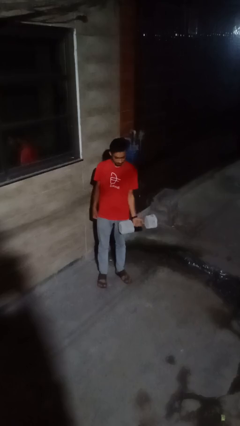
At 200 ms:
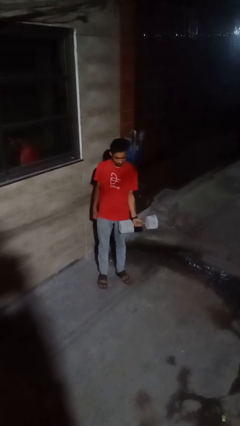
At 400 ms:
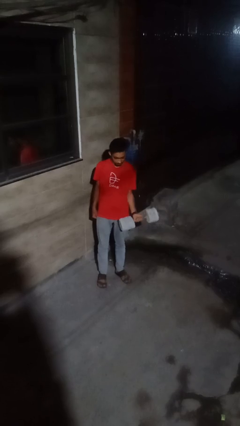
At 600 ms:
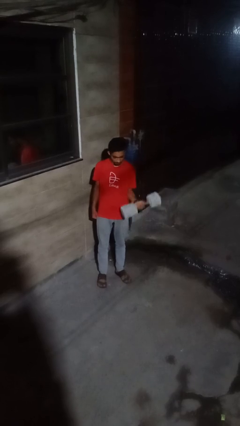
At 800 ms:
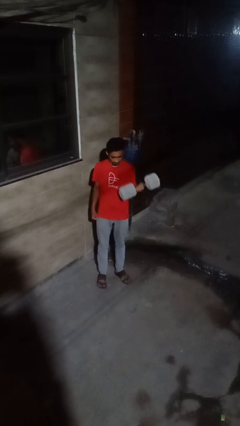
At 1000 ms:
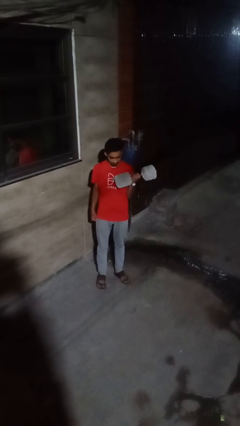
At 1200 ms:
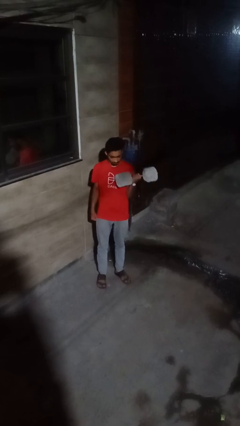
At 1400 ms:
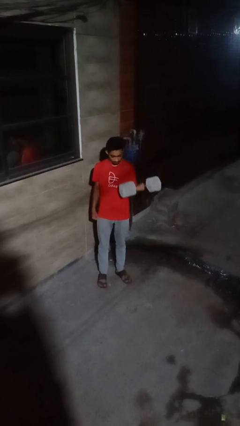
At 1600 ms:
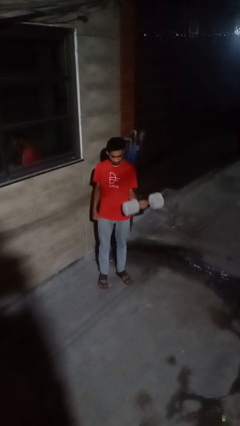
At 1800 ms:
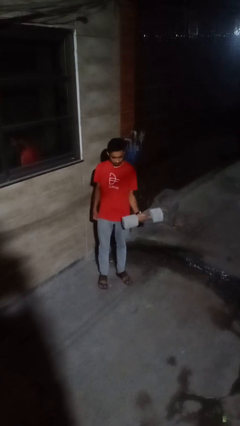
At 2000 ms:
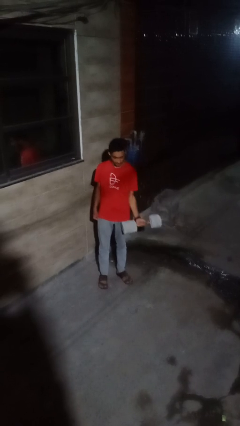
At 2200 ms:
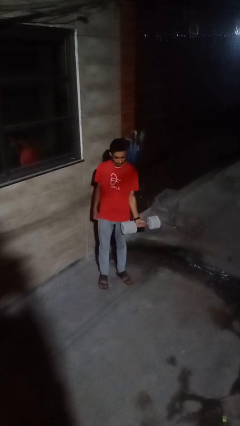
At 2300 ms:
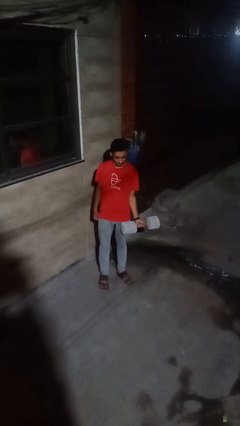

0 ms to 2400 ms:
person lifts dumbbells

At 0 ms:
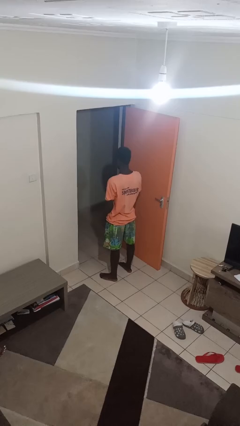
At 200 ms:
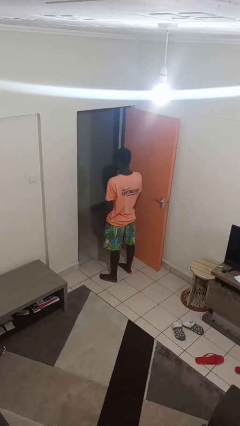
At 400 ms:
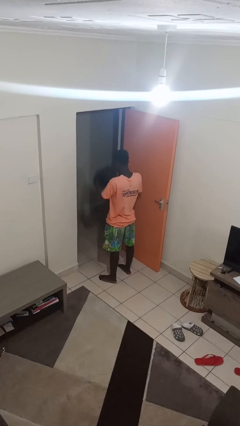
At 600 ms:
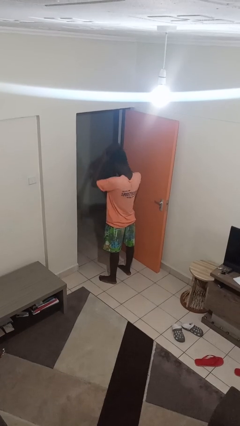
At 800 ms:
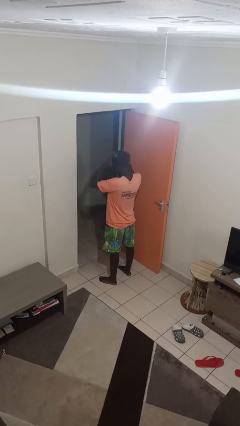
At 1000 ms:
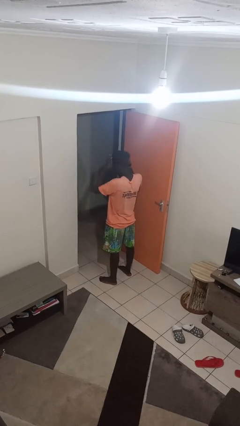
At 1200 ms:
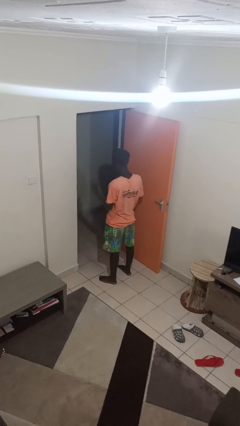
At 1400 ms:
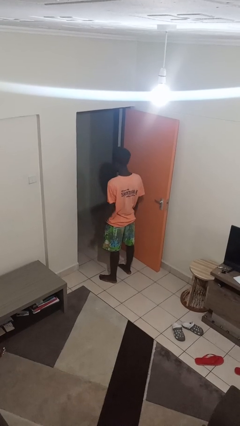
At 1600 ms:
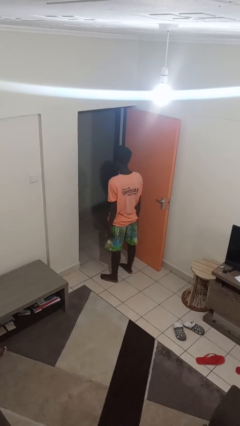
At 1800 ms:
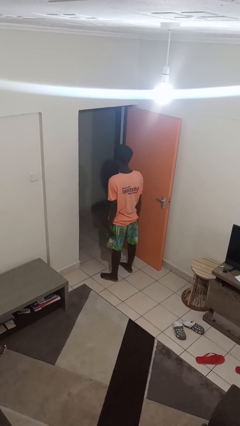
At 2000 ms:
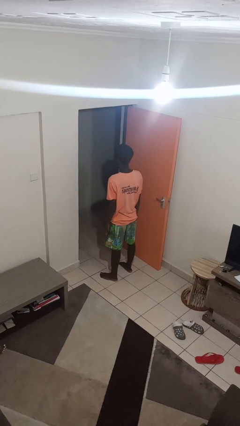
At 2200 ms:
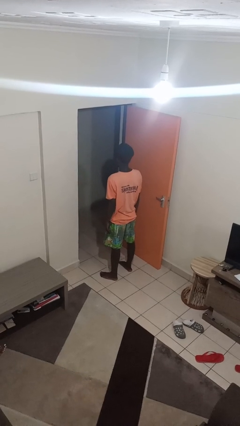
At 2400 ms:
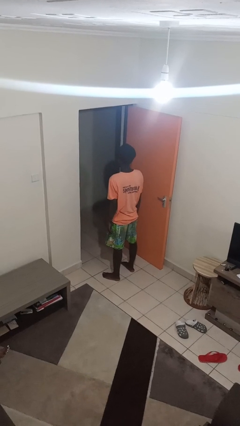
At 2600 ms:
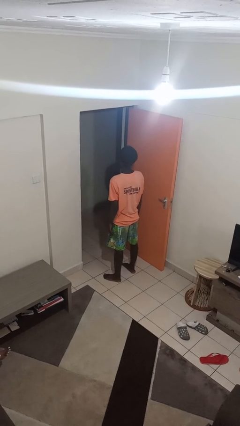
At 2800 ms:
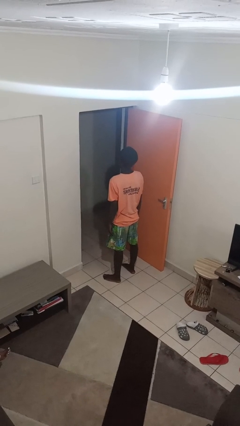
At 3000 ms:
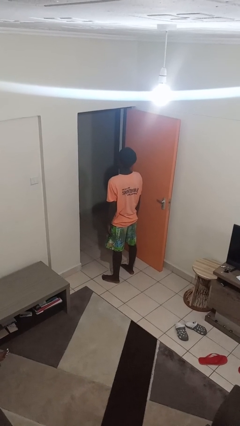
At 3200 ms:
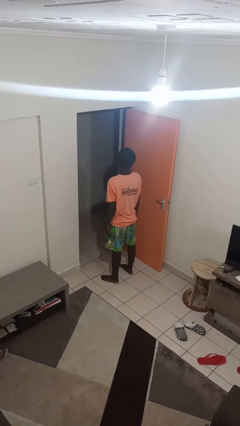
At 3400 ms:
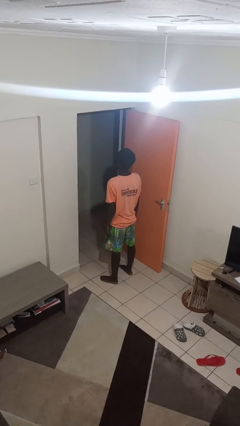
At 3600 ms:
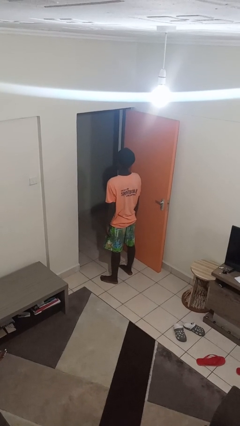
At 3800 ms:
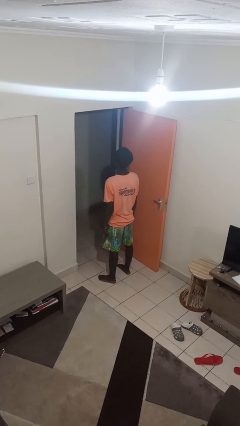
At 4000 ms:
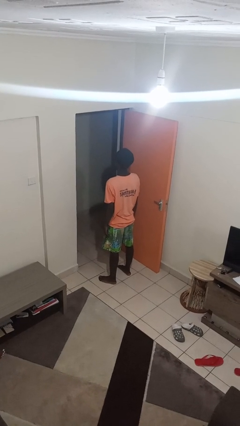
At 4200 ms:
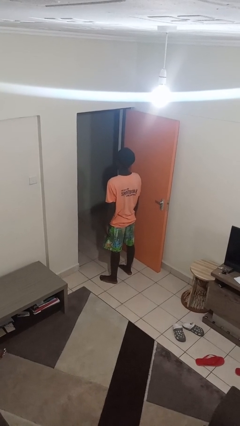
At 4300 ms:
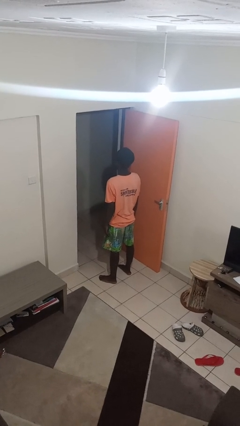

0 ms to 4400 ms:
person puts on hat

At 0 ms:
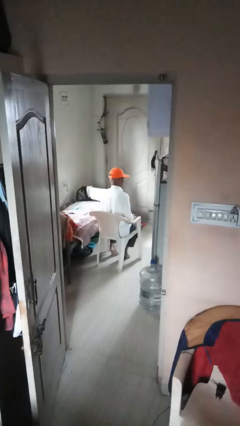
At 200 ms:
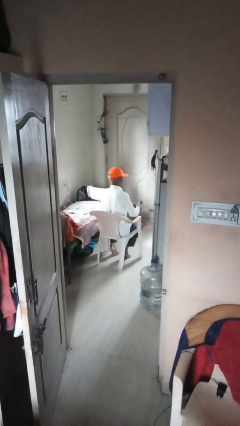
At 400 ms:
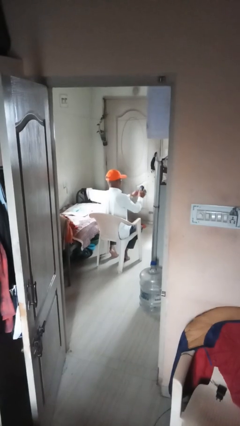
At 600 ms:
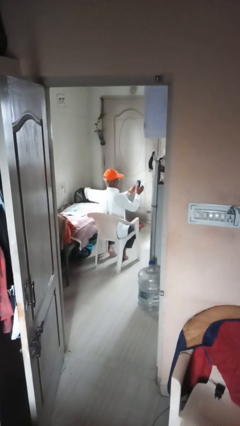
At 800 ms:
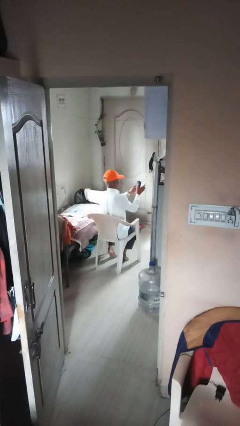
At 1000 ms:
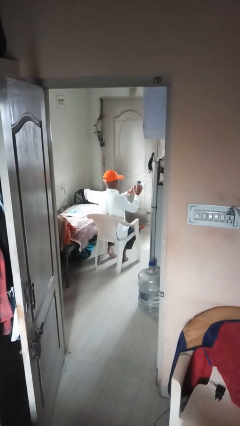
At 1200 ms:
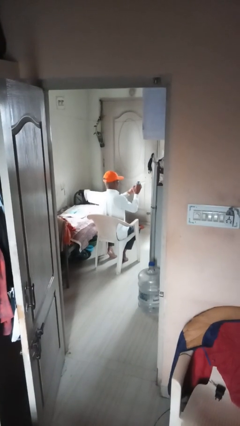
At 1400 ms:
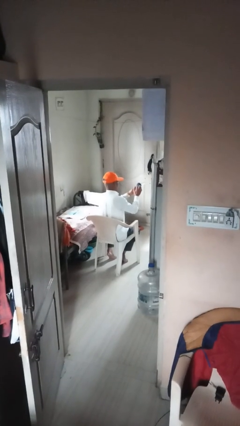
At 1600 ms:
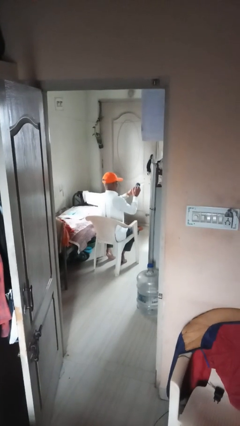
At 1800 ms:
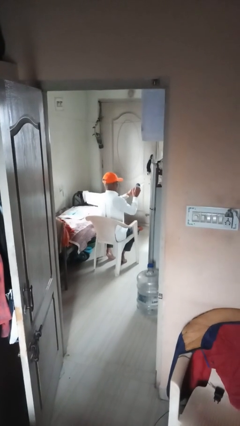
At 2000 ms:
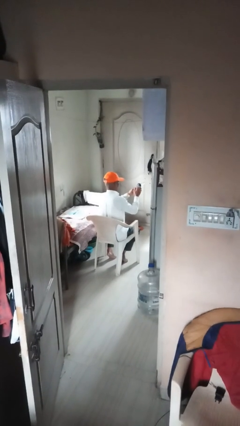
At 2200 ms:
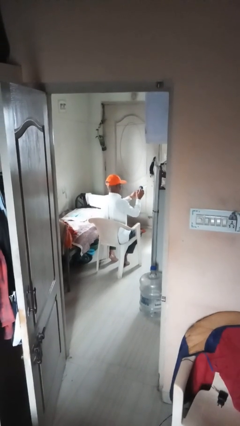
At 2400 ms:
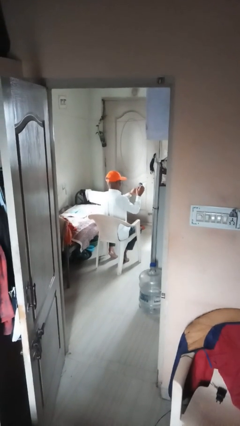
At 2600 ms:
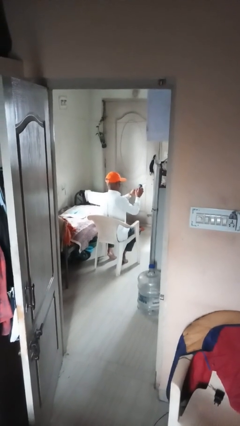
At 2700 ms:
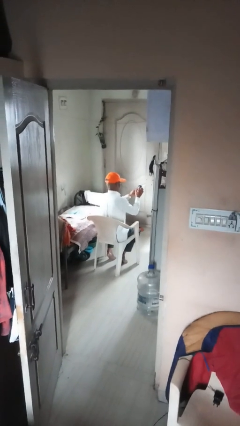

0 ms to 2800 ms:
person taps object with finger

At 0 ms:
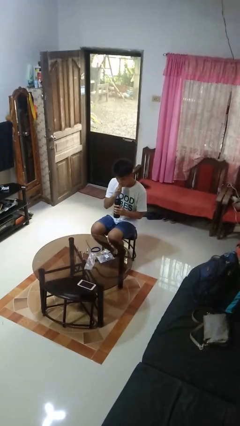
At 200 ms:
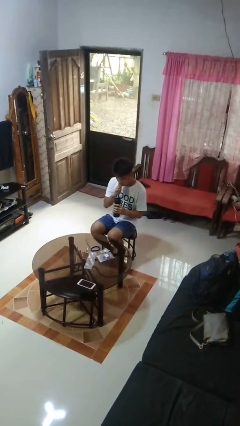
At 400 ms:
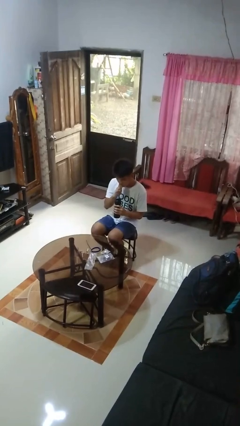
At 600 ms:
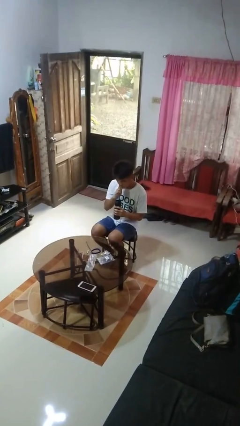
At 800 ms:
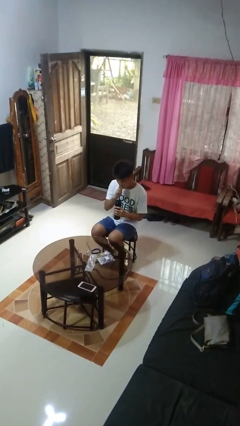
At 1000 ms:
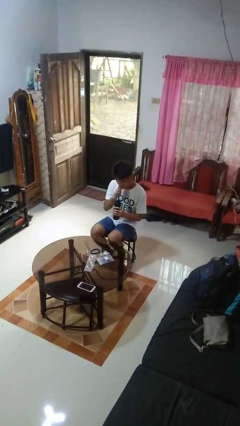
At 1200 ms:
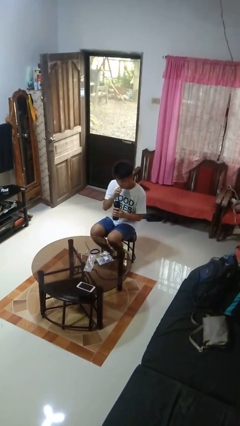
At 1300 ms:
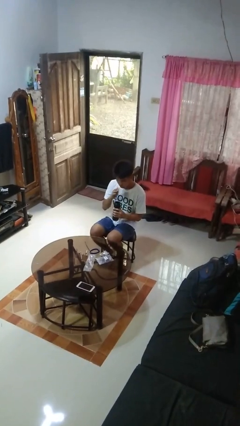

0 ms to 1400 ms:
person drinks from straw

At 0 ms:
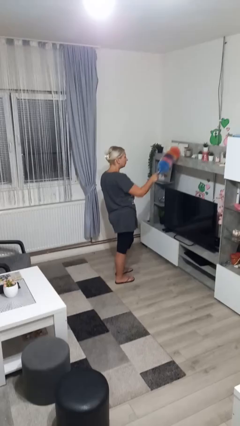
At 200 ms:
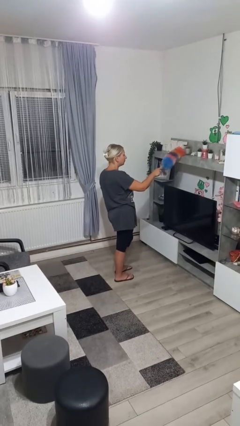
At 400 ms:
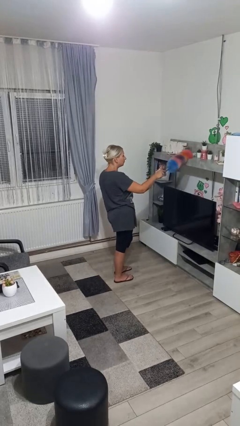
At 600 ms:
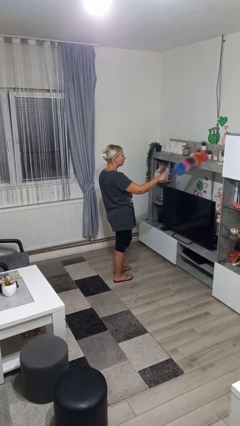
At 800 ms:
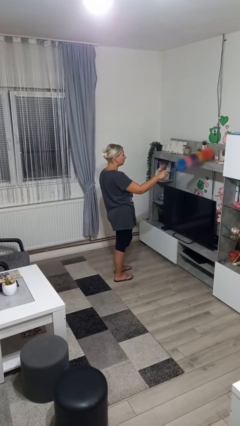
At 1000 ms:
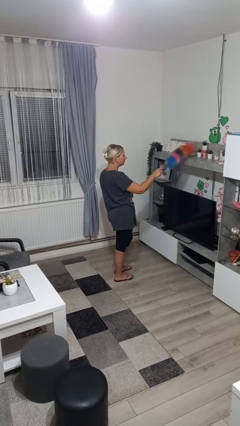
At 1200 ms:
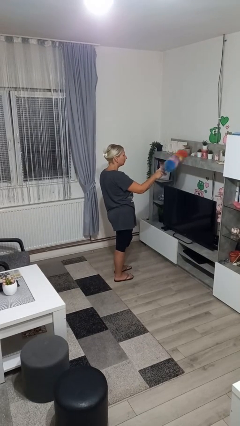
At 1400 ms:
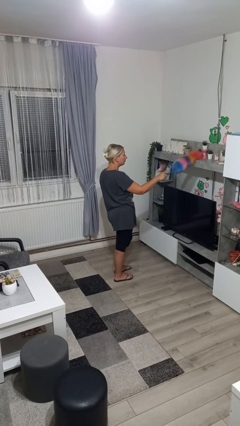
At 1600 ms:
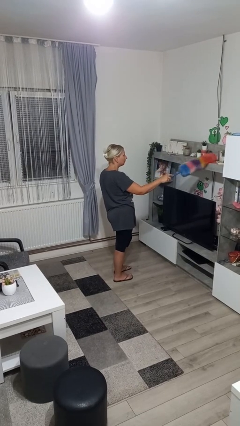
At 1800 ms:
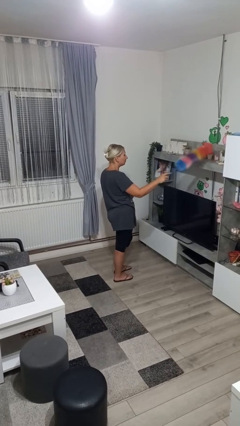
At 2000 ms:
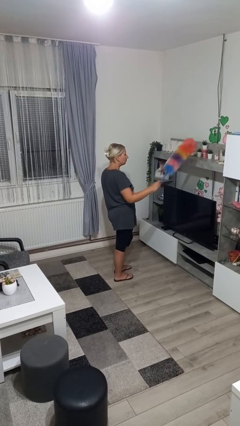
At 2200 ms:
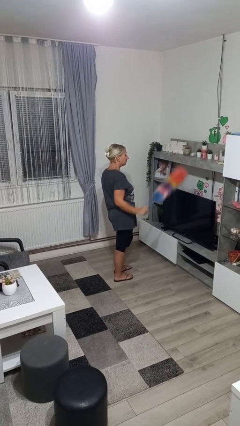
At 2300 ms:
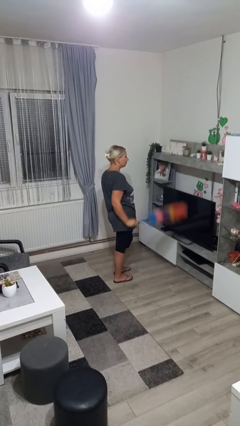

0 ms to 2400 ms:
person dusts furniture

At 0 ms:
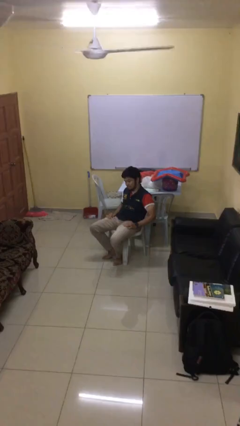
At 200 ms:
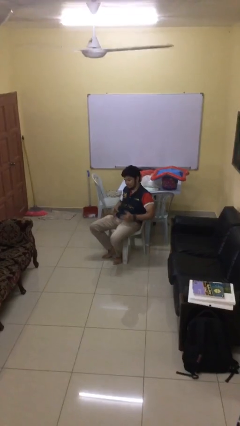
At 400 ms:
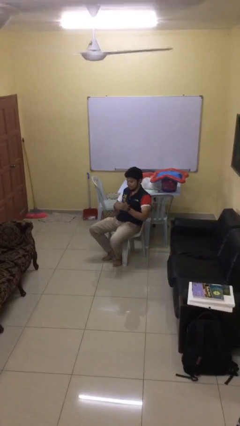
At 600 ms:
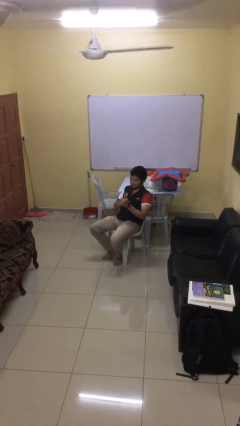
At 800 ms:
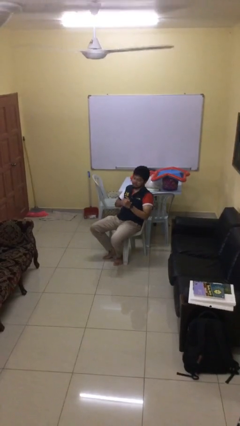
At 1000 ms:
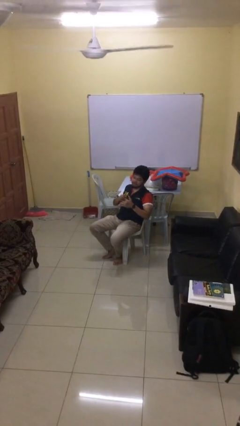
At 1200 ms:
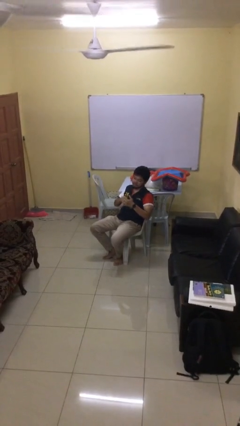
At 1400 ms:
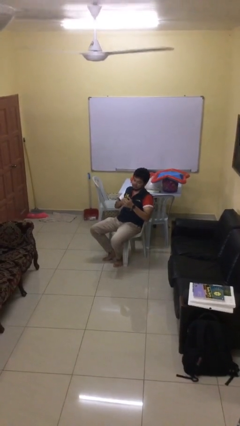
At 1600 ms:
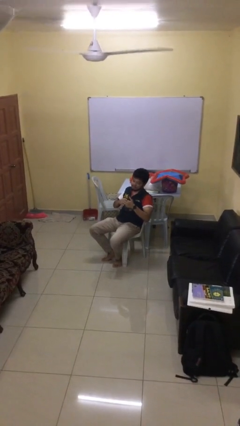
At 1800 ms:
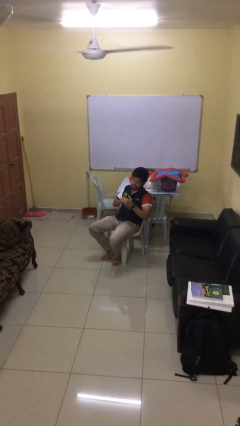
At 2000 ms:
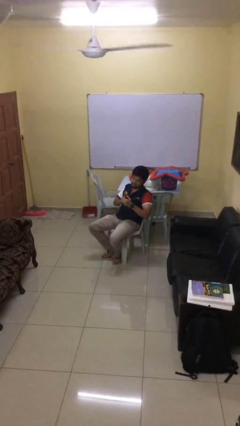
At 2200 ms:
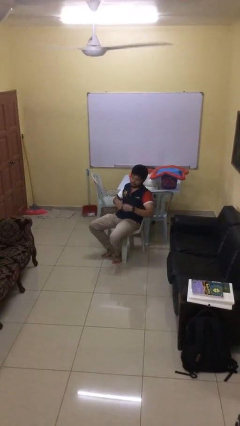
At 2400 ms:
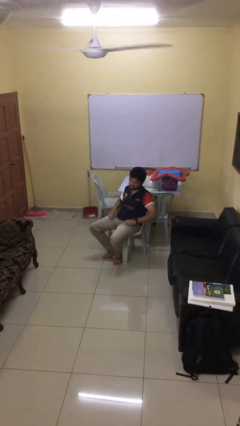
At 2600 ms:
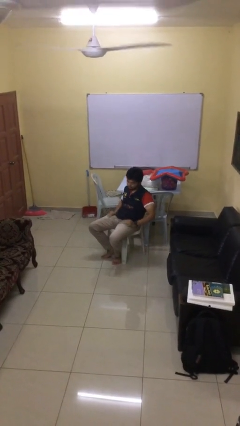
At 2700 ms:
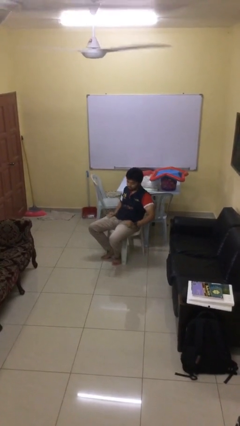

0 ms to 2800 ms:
person cracks knuckles

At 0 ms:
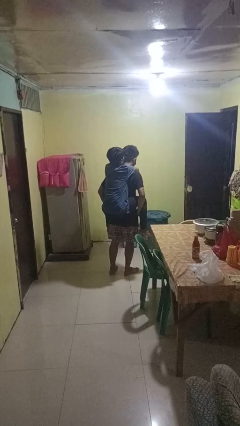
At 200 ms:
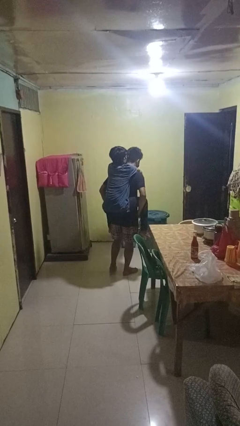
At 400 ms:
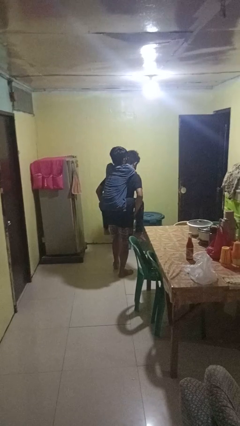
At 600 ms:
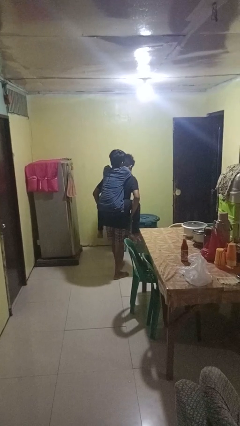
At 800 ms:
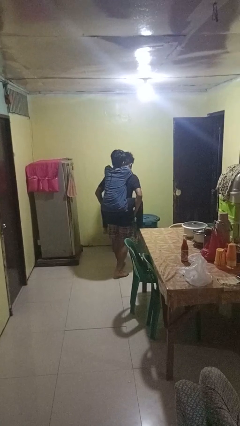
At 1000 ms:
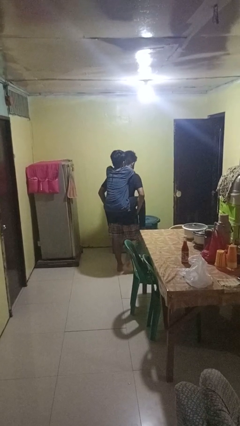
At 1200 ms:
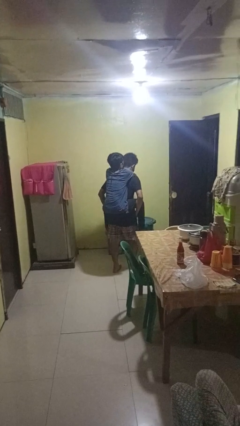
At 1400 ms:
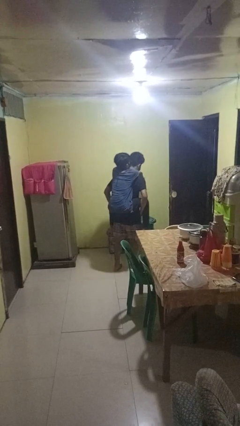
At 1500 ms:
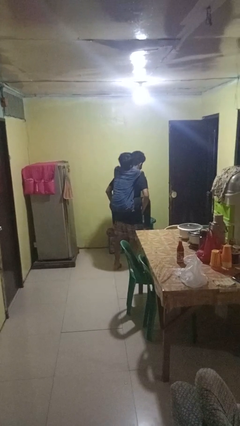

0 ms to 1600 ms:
person carries person on back
